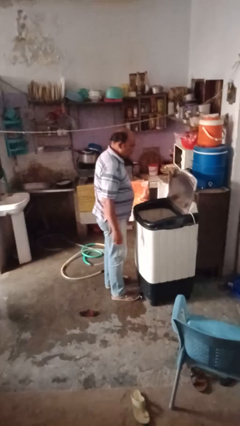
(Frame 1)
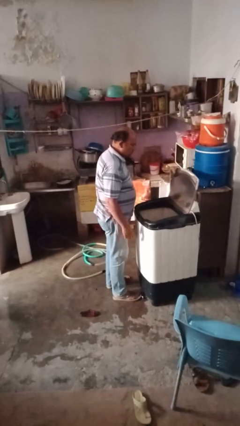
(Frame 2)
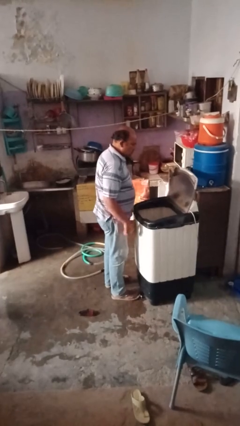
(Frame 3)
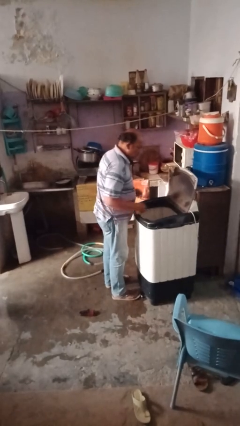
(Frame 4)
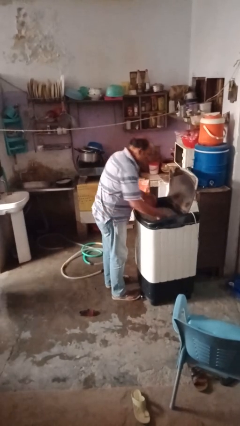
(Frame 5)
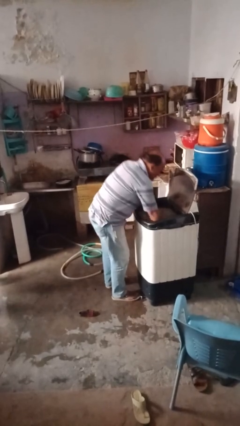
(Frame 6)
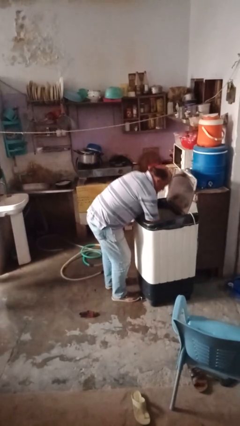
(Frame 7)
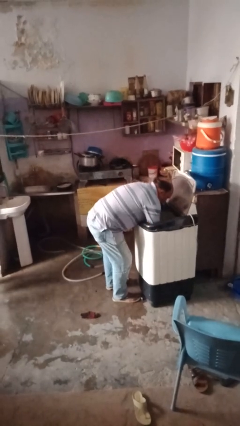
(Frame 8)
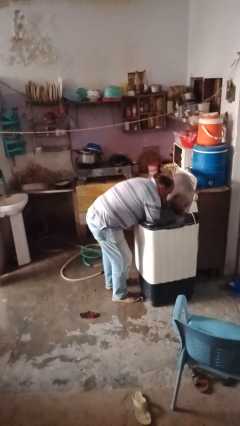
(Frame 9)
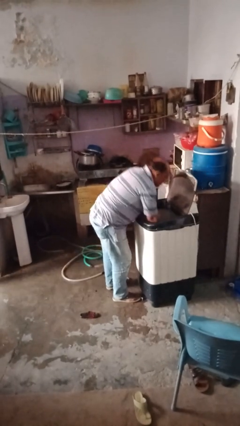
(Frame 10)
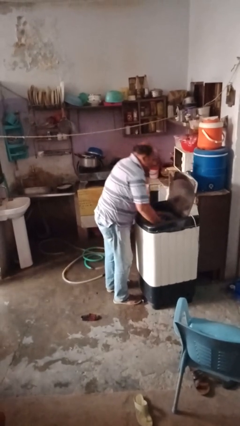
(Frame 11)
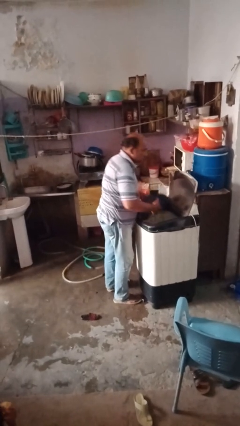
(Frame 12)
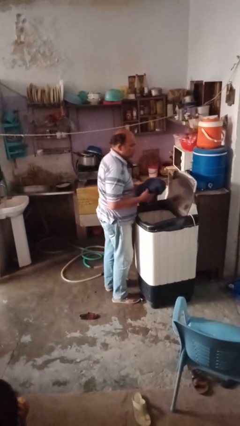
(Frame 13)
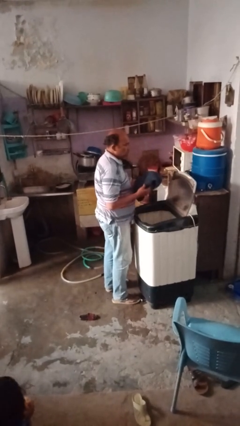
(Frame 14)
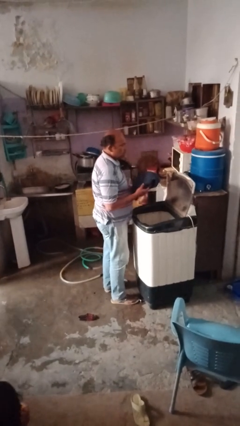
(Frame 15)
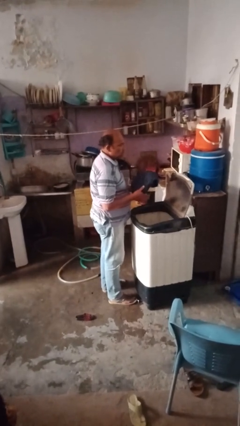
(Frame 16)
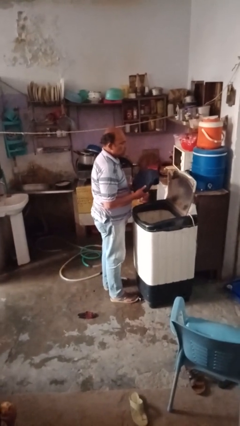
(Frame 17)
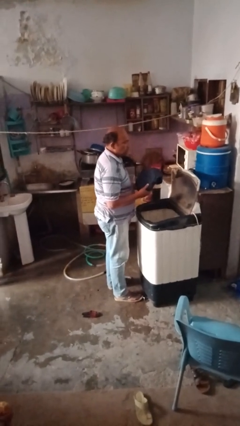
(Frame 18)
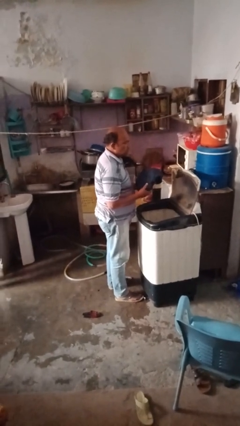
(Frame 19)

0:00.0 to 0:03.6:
person unloads clotheswasher

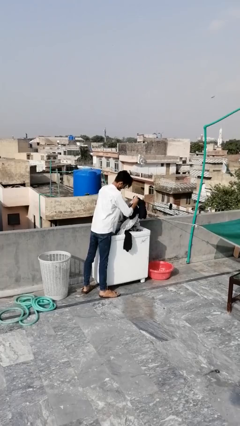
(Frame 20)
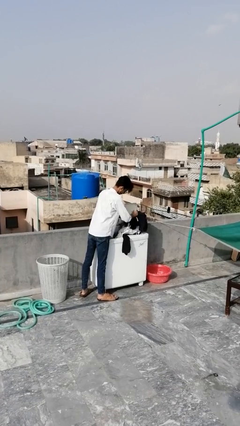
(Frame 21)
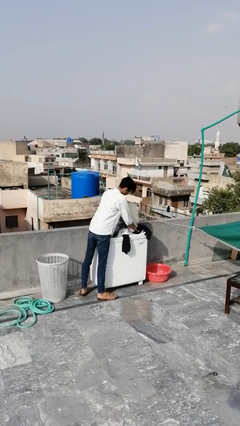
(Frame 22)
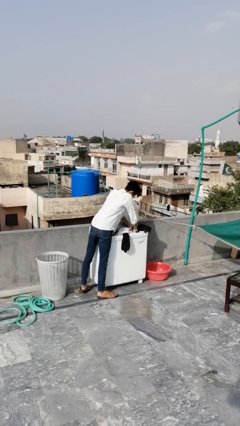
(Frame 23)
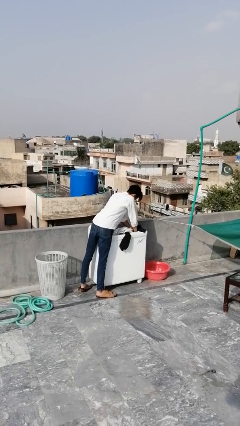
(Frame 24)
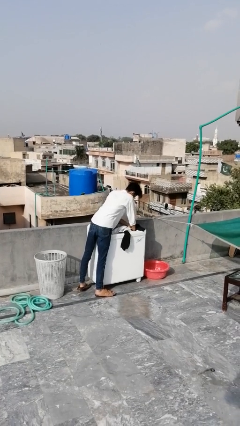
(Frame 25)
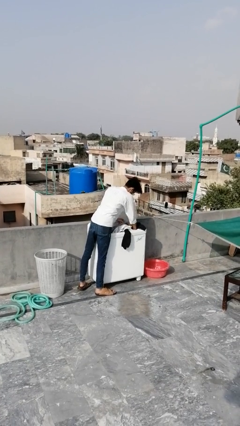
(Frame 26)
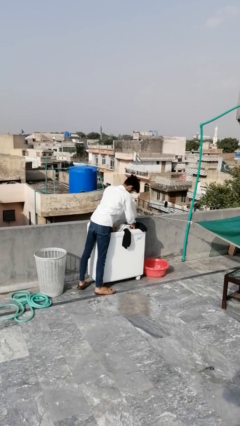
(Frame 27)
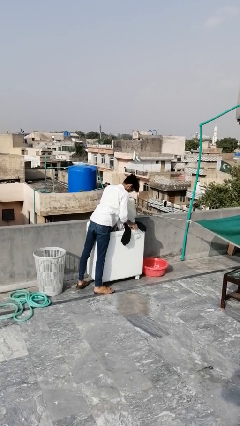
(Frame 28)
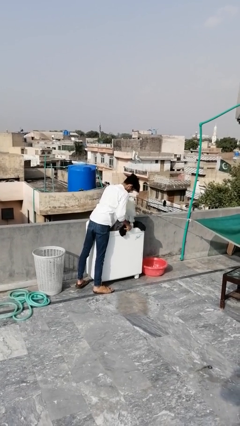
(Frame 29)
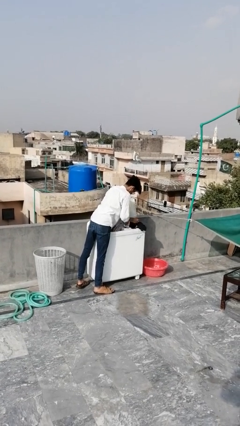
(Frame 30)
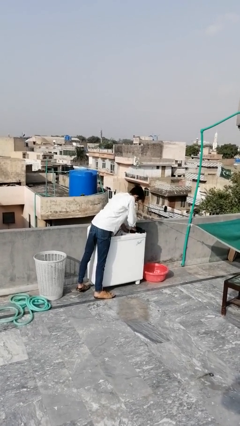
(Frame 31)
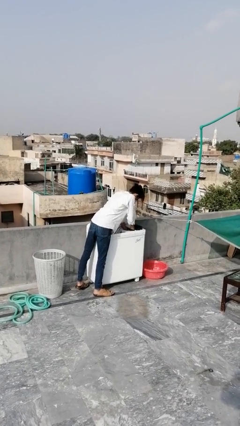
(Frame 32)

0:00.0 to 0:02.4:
person loads dryer

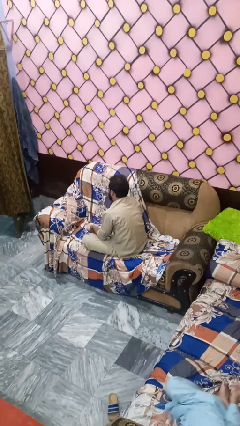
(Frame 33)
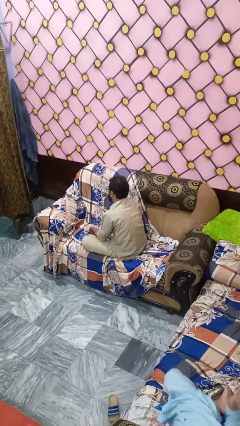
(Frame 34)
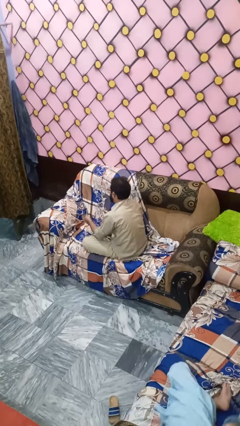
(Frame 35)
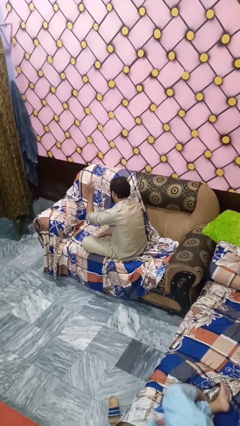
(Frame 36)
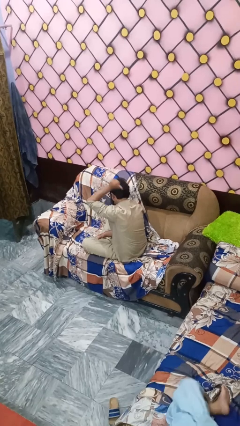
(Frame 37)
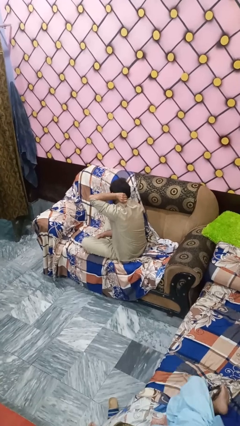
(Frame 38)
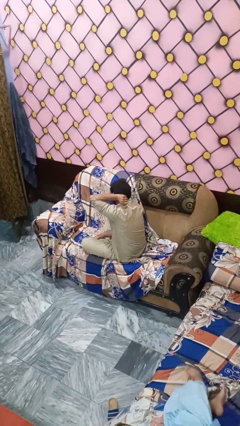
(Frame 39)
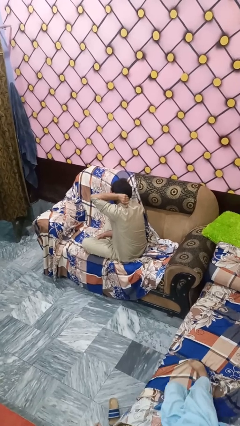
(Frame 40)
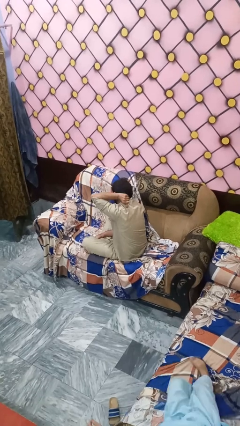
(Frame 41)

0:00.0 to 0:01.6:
person gestures behind me

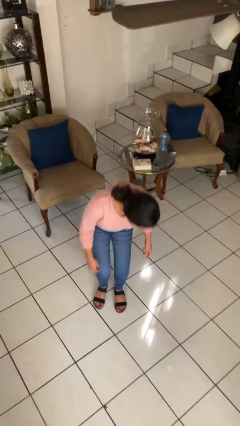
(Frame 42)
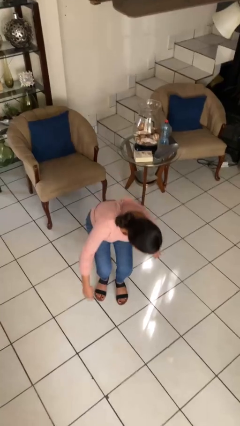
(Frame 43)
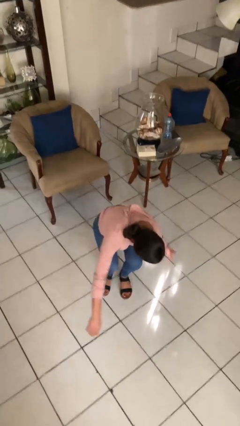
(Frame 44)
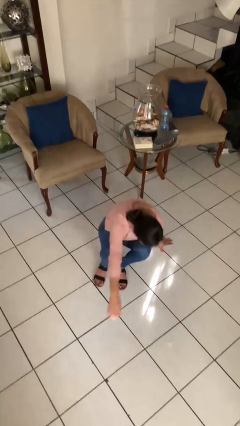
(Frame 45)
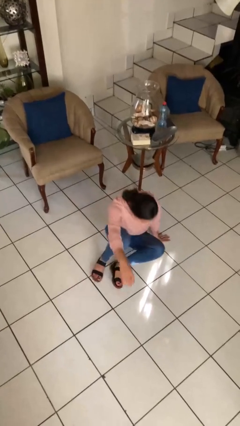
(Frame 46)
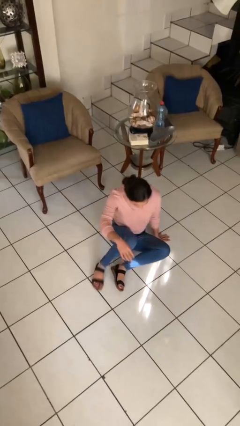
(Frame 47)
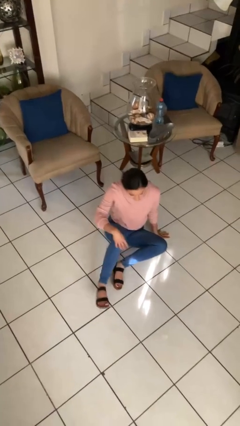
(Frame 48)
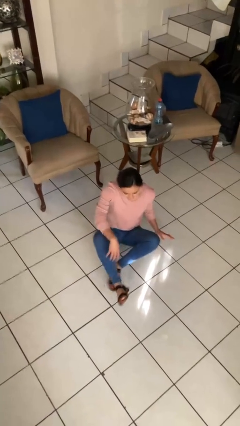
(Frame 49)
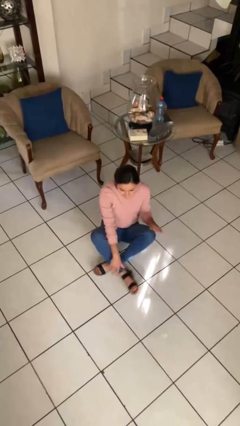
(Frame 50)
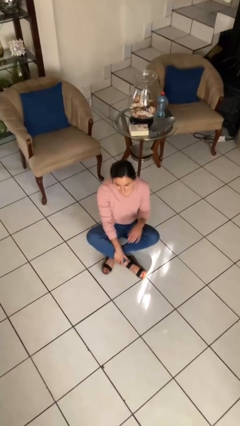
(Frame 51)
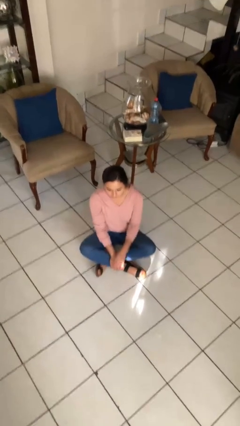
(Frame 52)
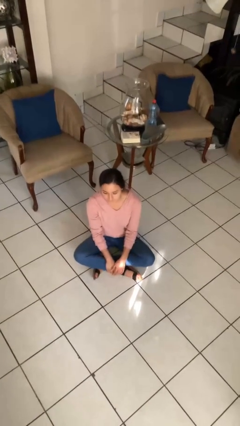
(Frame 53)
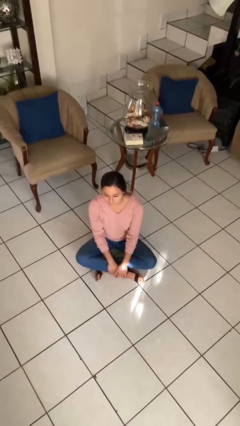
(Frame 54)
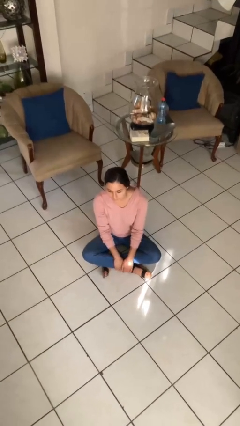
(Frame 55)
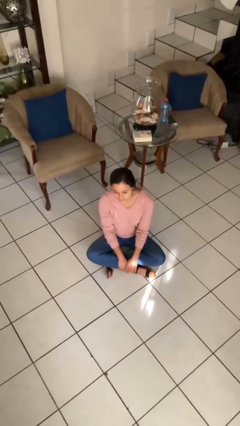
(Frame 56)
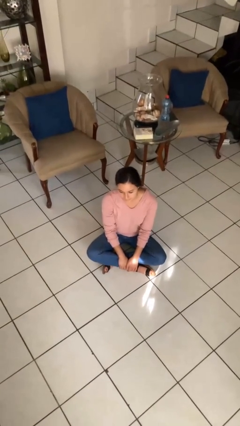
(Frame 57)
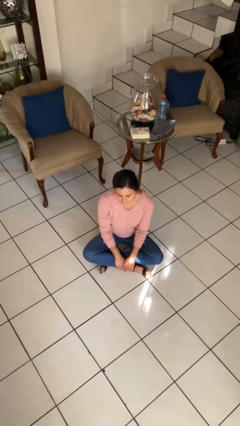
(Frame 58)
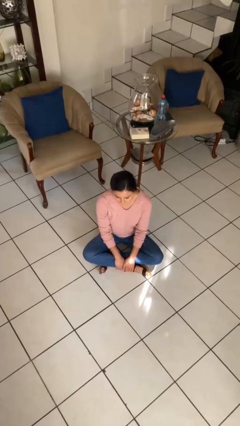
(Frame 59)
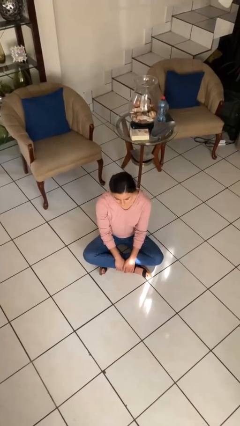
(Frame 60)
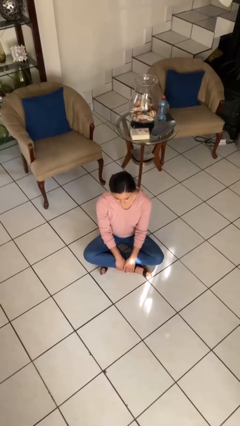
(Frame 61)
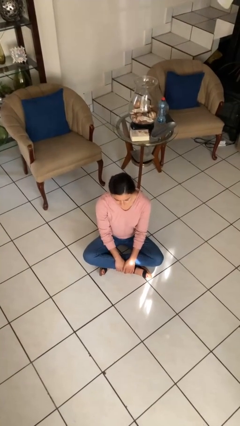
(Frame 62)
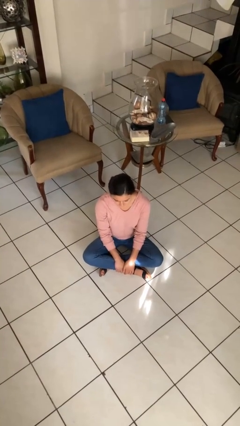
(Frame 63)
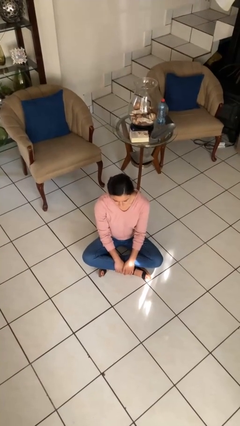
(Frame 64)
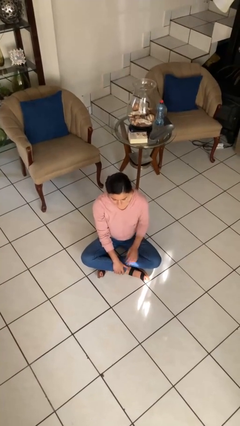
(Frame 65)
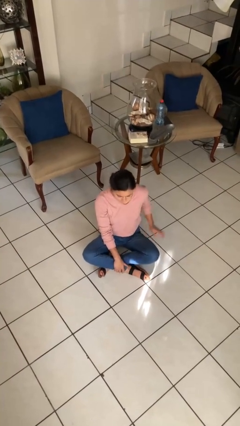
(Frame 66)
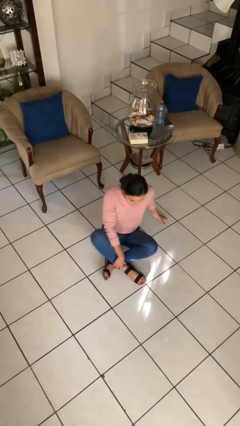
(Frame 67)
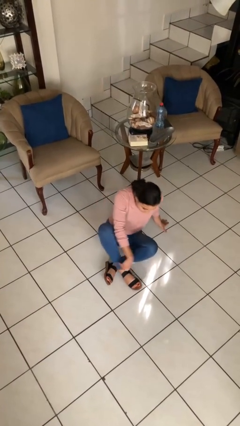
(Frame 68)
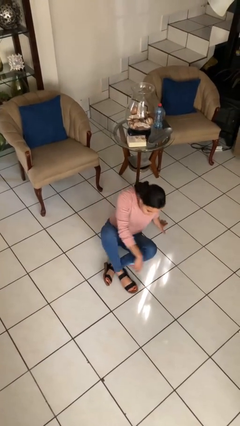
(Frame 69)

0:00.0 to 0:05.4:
person sits crisscross

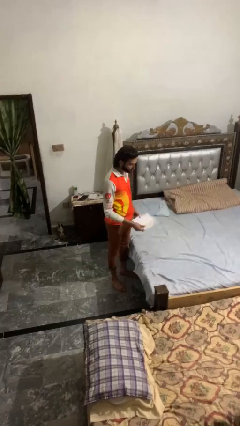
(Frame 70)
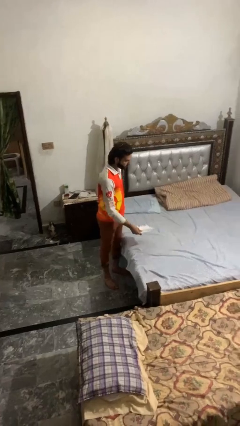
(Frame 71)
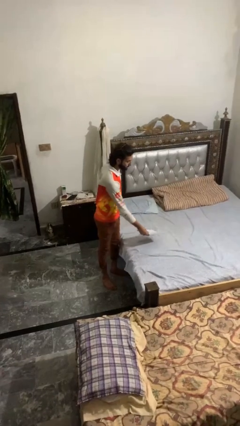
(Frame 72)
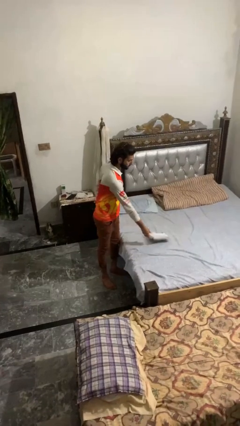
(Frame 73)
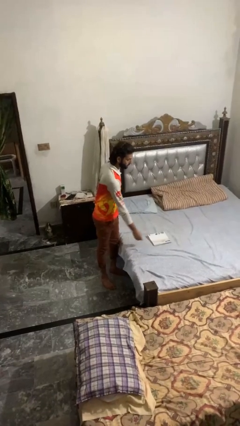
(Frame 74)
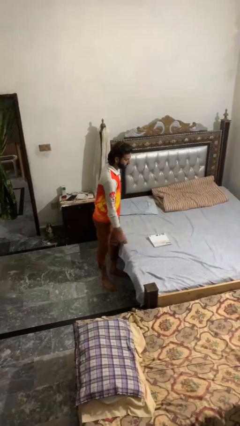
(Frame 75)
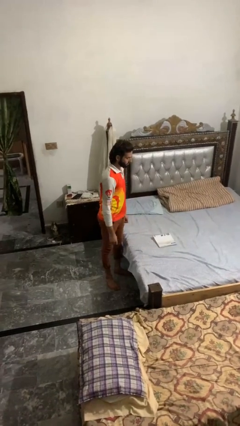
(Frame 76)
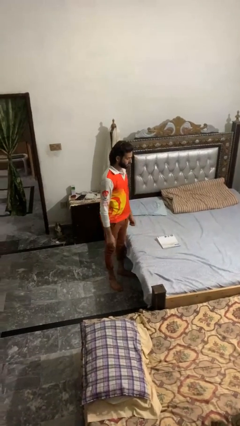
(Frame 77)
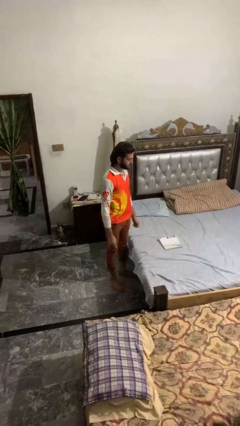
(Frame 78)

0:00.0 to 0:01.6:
person puts down object on bed

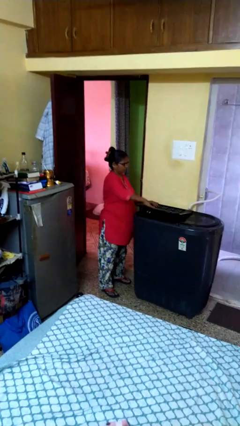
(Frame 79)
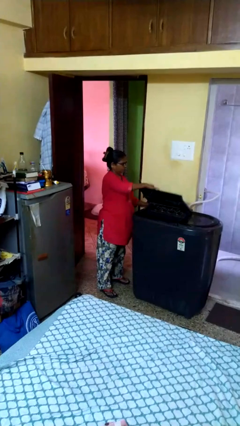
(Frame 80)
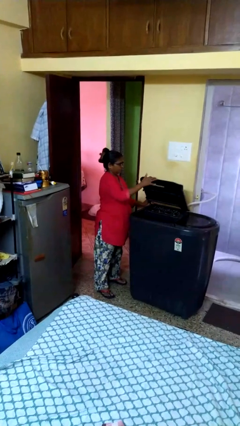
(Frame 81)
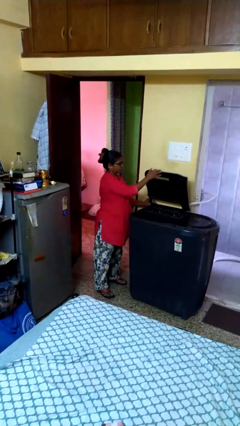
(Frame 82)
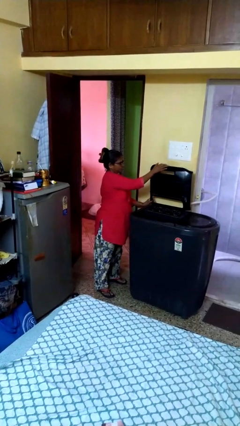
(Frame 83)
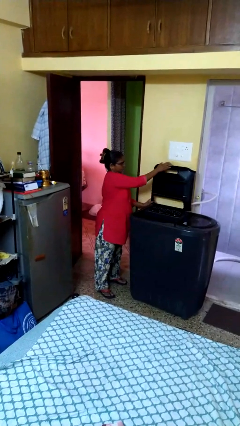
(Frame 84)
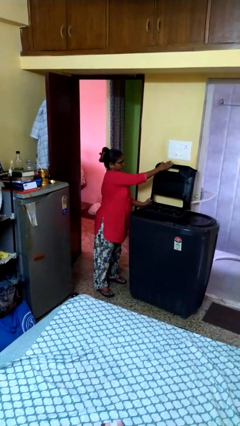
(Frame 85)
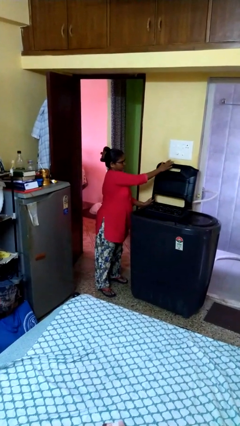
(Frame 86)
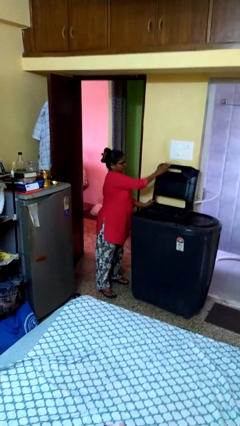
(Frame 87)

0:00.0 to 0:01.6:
person opens clothes washer

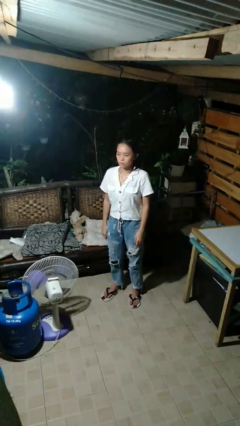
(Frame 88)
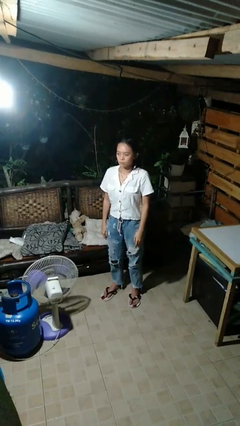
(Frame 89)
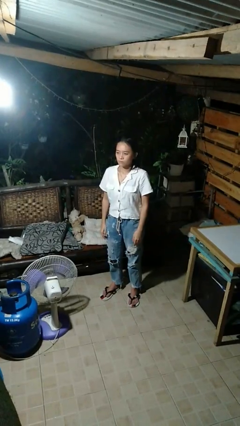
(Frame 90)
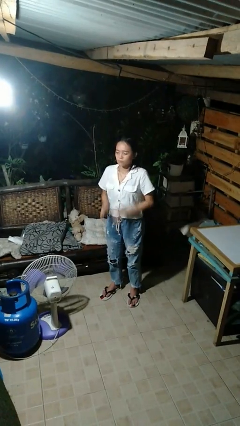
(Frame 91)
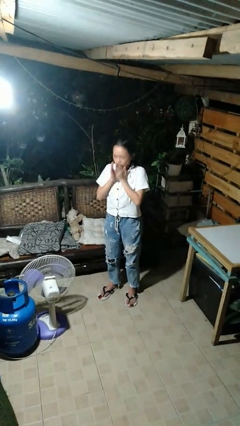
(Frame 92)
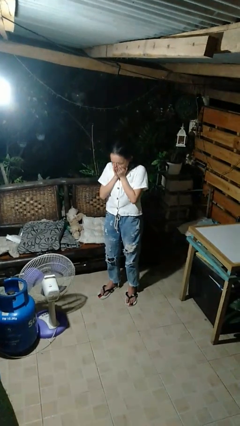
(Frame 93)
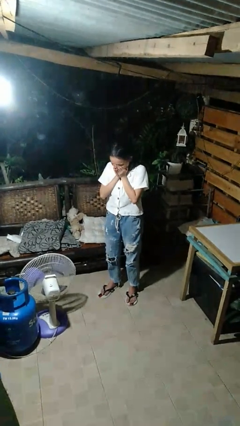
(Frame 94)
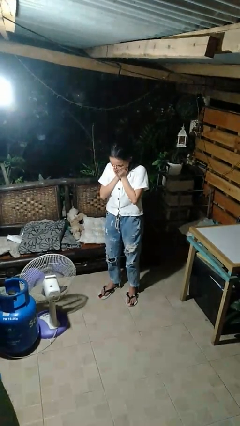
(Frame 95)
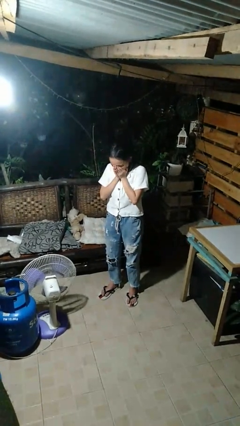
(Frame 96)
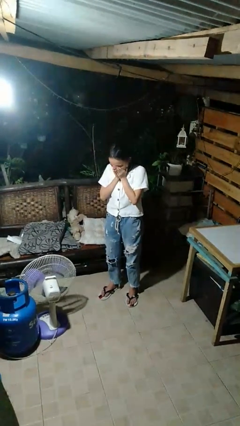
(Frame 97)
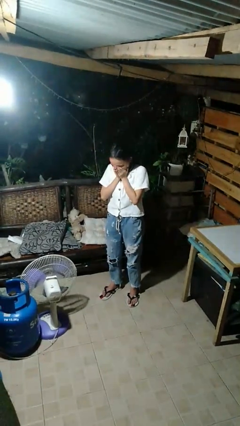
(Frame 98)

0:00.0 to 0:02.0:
person sneezes into hand
